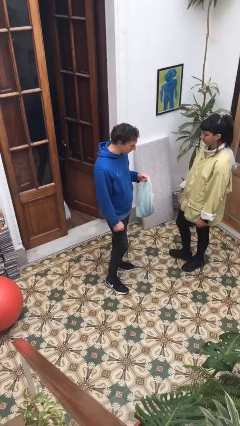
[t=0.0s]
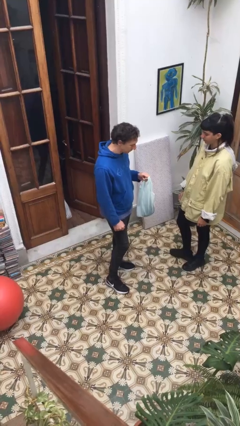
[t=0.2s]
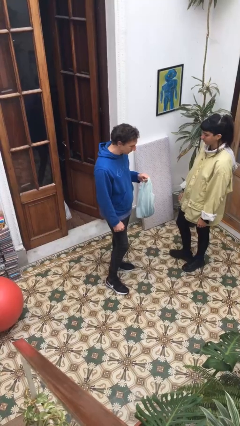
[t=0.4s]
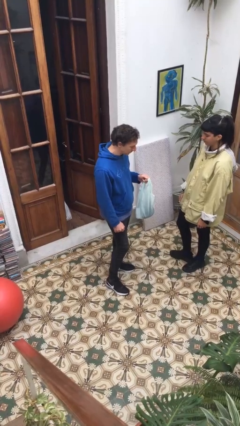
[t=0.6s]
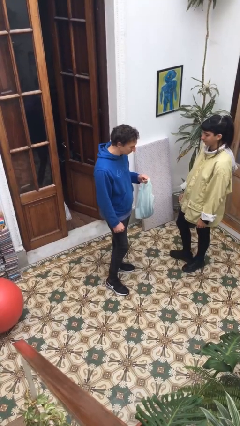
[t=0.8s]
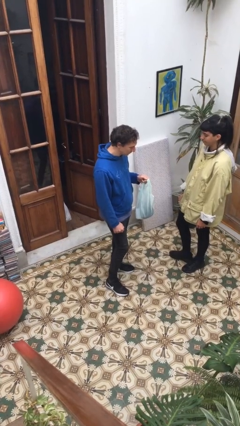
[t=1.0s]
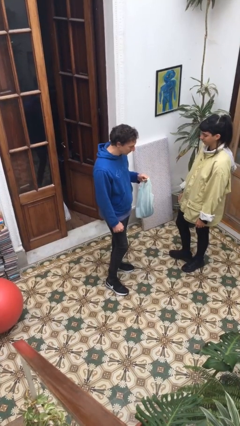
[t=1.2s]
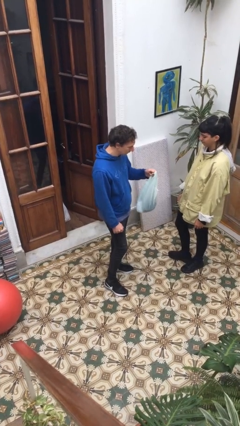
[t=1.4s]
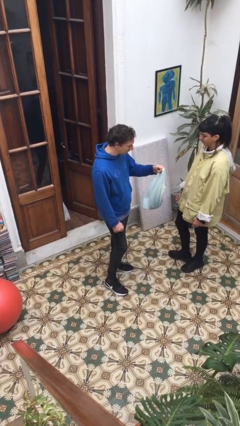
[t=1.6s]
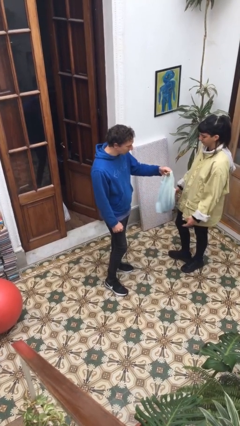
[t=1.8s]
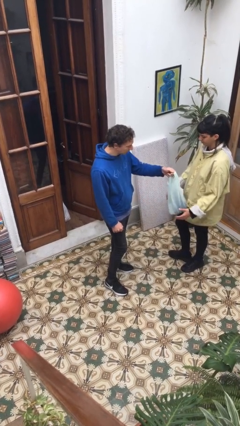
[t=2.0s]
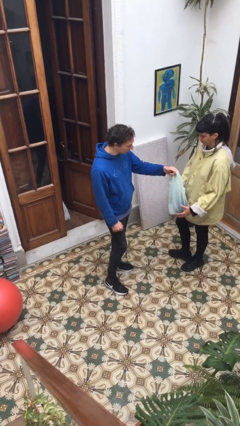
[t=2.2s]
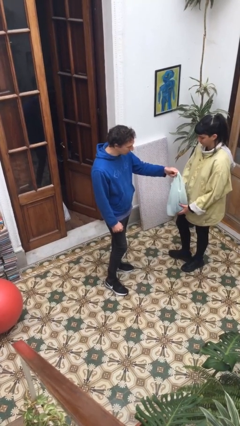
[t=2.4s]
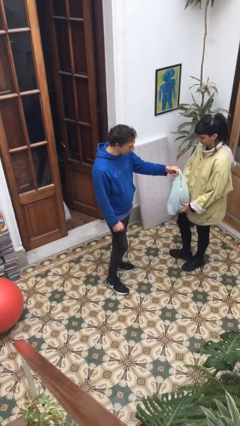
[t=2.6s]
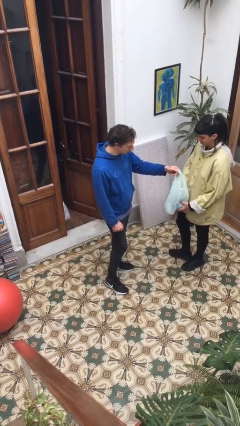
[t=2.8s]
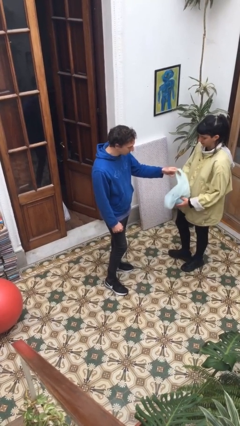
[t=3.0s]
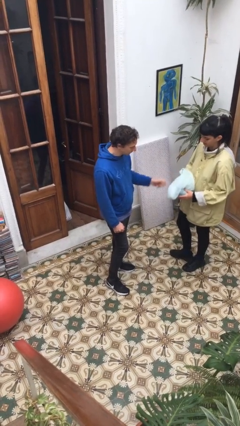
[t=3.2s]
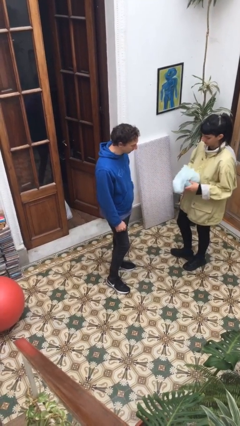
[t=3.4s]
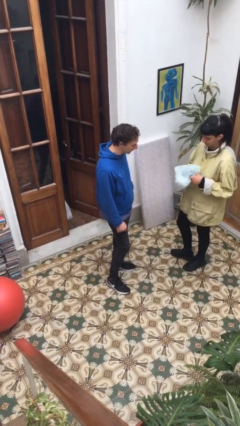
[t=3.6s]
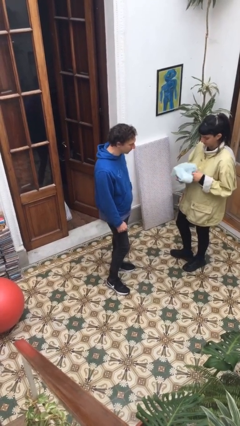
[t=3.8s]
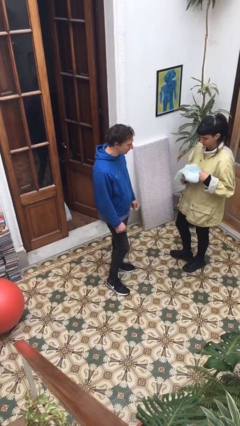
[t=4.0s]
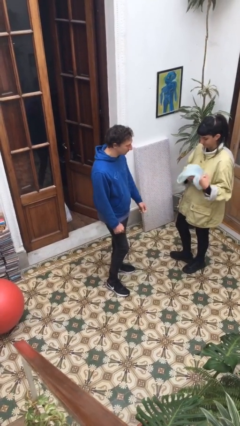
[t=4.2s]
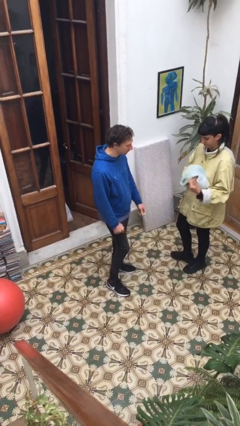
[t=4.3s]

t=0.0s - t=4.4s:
person transfers object to person

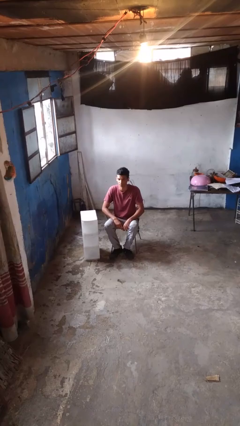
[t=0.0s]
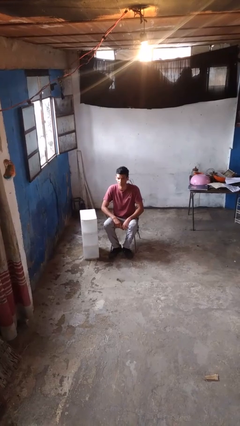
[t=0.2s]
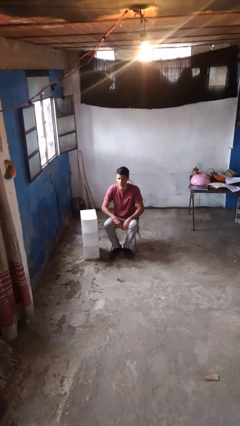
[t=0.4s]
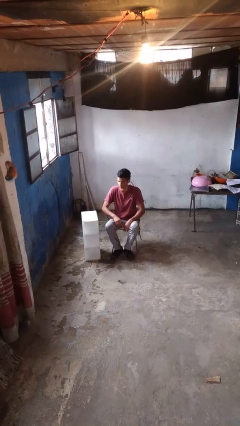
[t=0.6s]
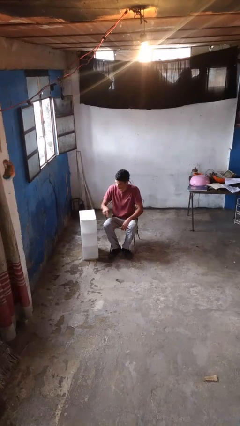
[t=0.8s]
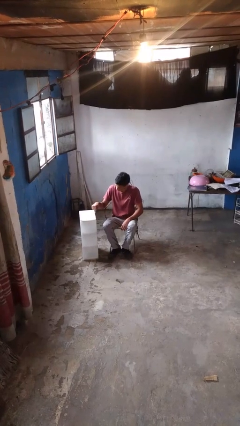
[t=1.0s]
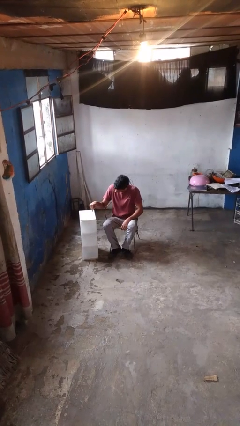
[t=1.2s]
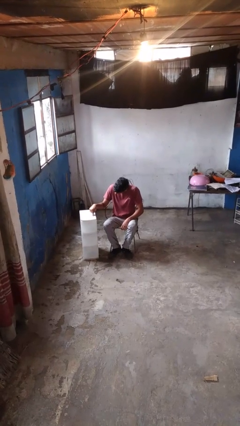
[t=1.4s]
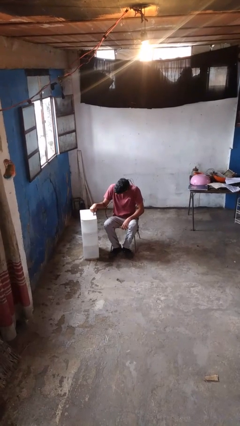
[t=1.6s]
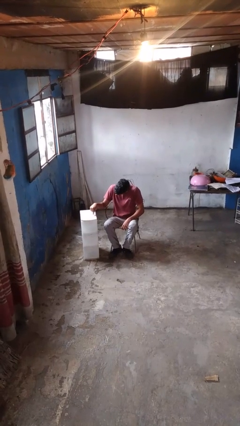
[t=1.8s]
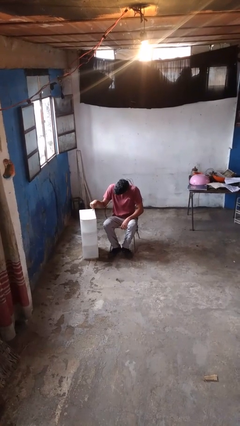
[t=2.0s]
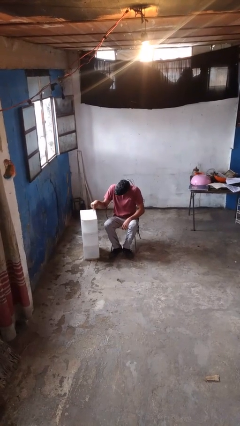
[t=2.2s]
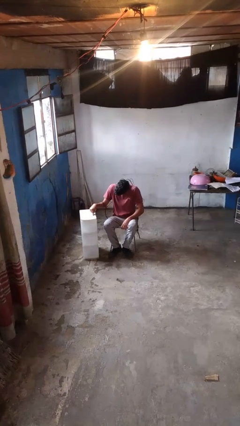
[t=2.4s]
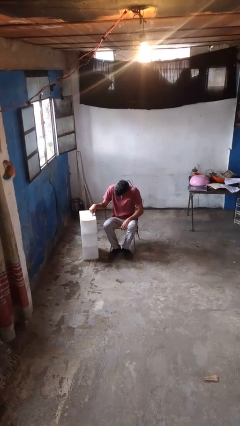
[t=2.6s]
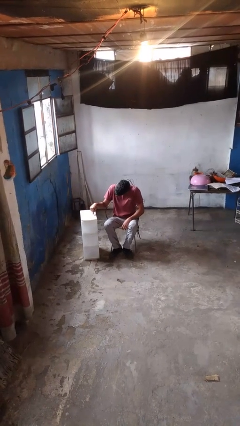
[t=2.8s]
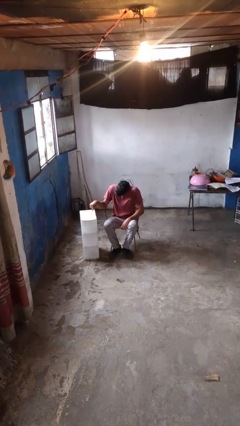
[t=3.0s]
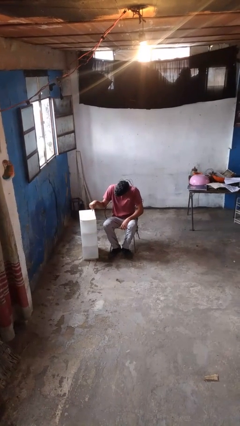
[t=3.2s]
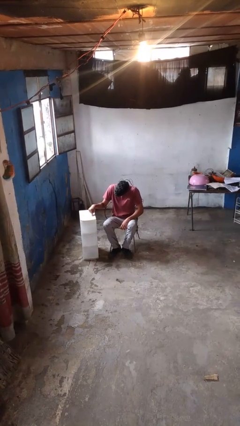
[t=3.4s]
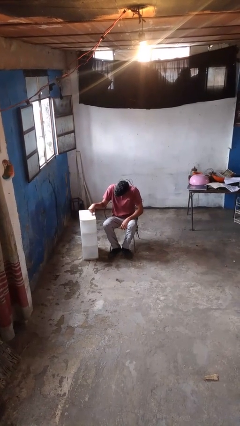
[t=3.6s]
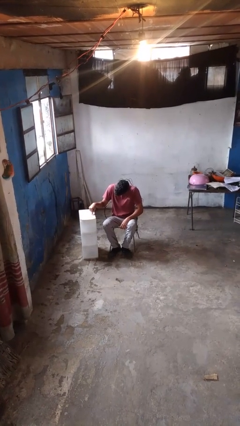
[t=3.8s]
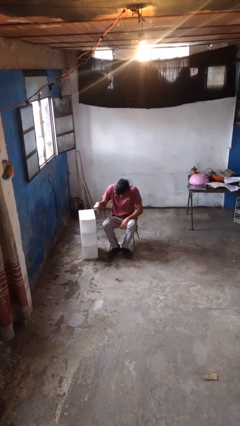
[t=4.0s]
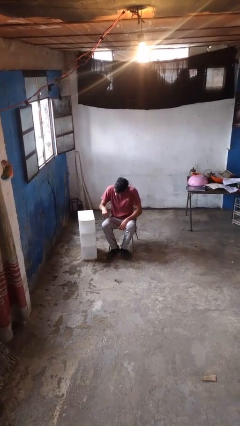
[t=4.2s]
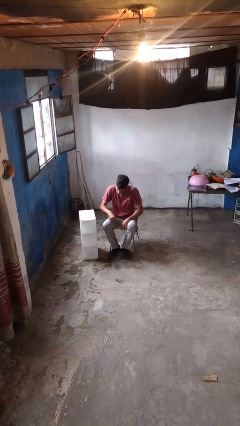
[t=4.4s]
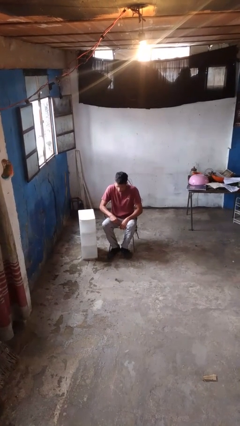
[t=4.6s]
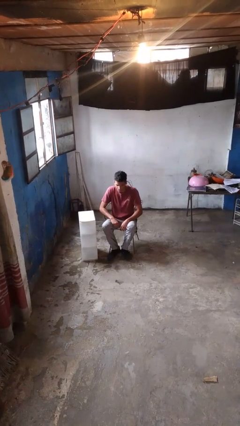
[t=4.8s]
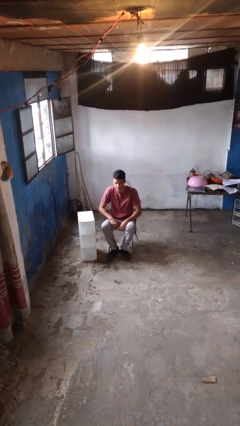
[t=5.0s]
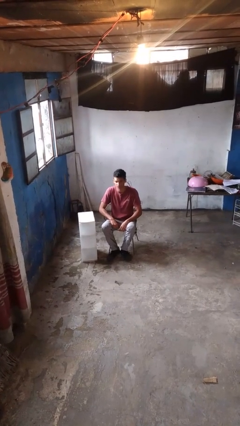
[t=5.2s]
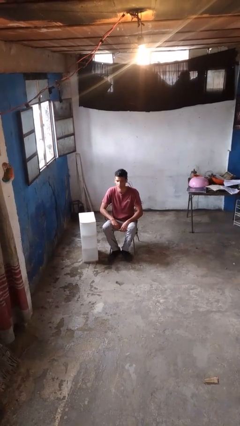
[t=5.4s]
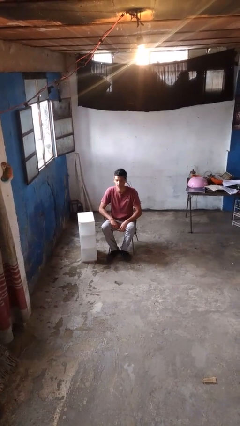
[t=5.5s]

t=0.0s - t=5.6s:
person taps object with finger

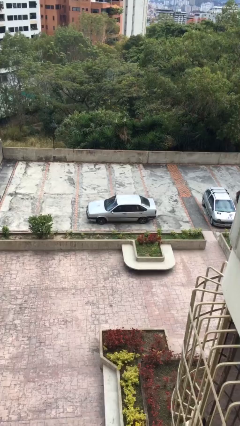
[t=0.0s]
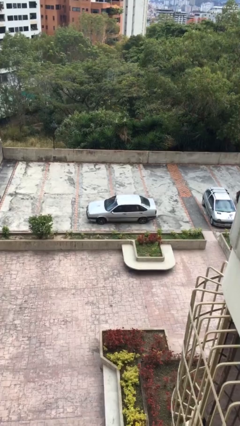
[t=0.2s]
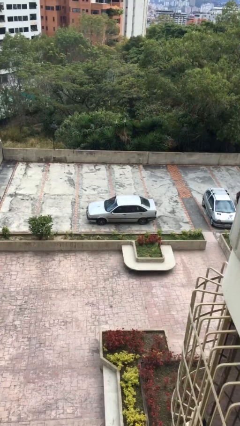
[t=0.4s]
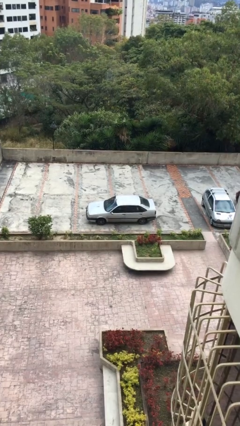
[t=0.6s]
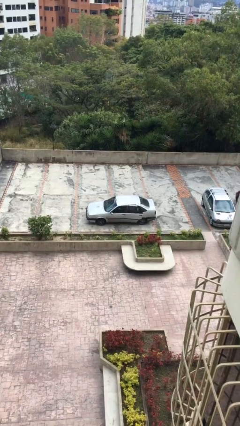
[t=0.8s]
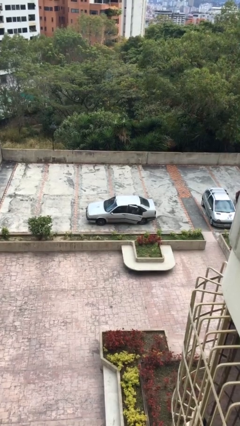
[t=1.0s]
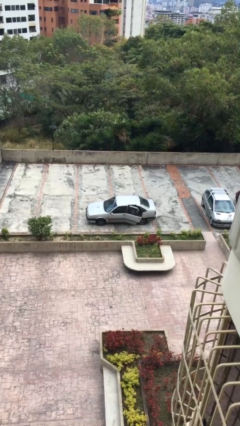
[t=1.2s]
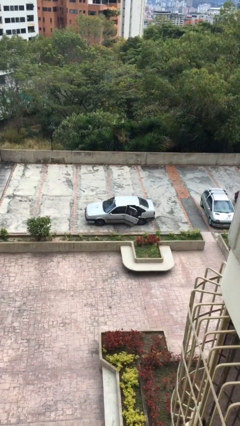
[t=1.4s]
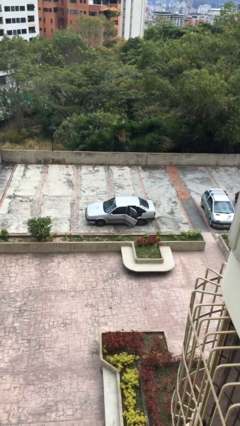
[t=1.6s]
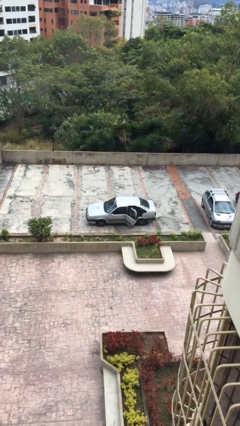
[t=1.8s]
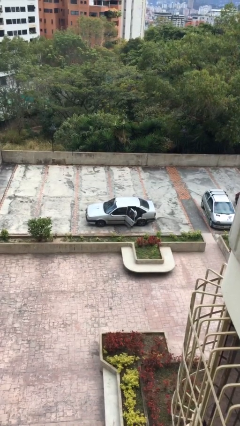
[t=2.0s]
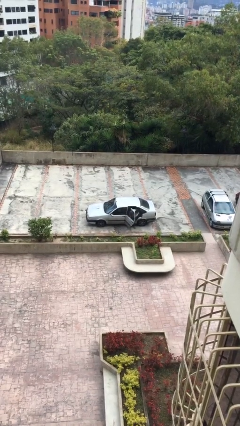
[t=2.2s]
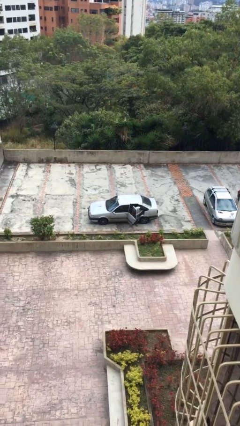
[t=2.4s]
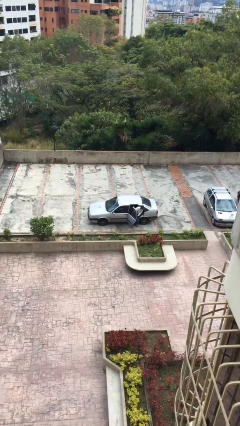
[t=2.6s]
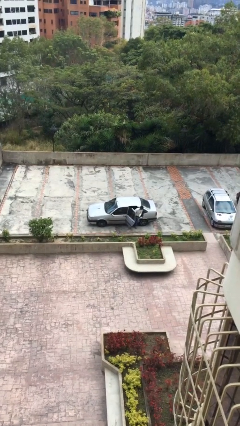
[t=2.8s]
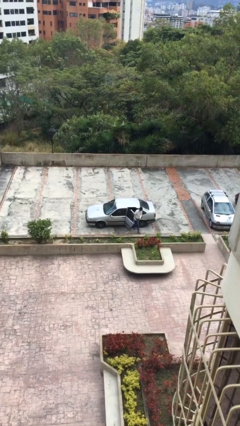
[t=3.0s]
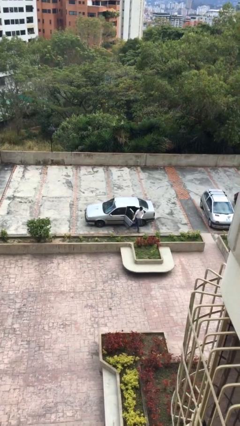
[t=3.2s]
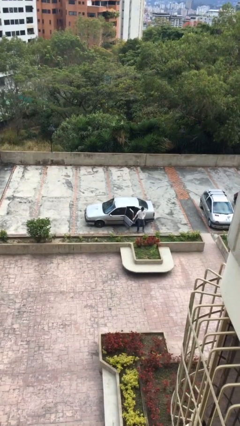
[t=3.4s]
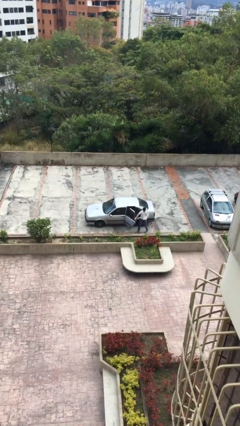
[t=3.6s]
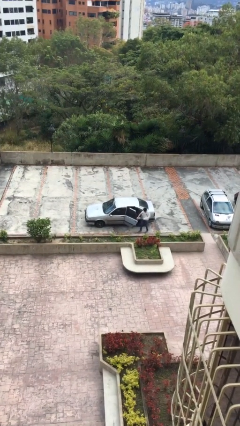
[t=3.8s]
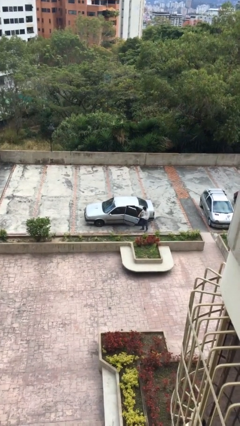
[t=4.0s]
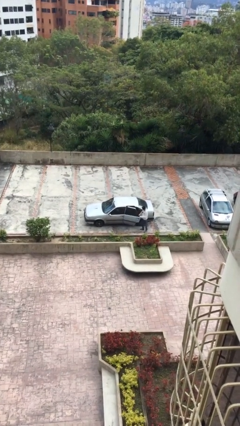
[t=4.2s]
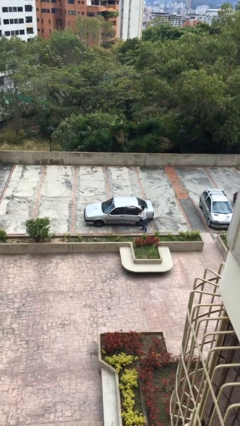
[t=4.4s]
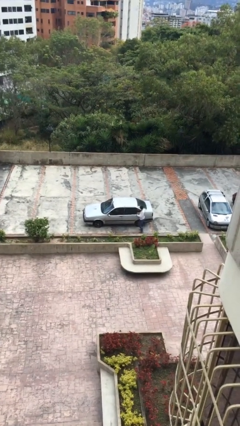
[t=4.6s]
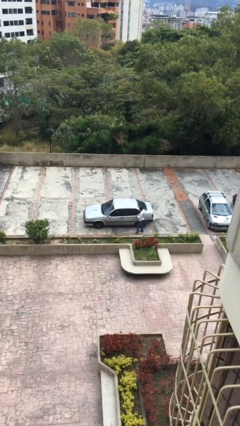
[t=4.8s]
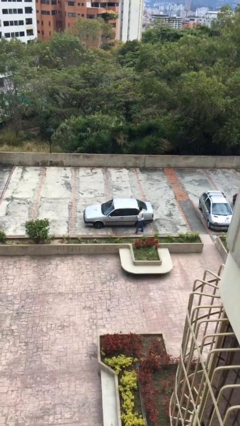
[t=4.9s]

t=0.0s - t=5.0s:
car drops off person

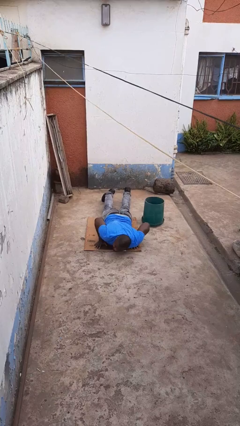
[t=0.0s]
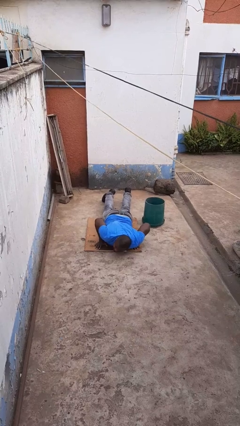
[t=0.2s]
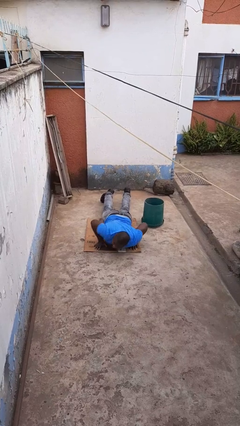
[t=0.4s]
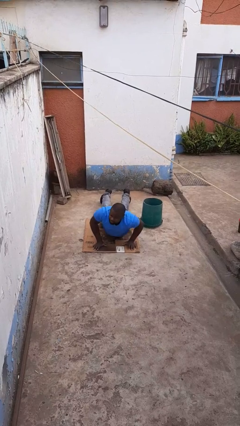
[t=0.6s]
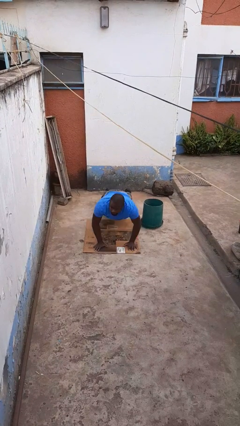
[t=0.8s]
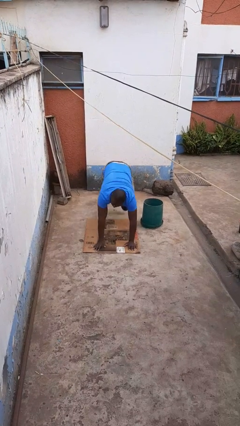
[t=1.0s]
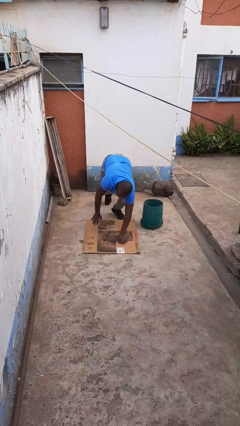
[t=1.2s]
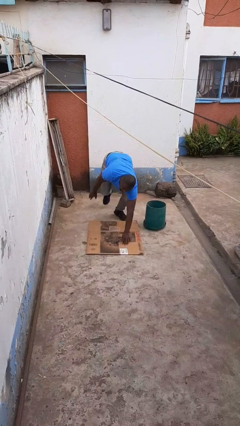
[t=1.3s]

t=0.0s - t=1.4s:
person stands up from floor

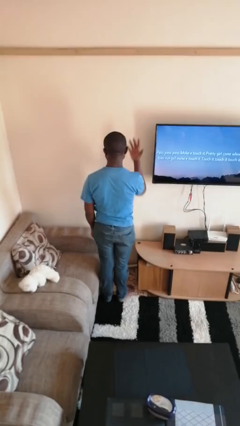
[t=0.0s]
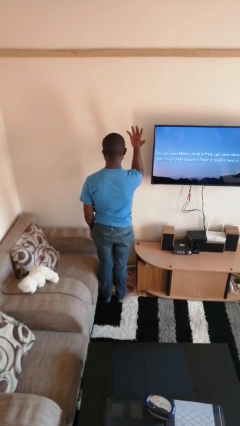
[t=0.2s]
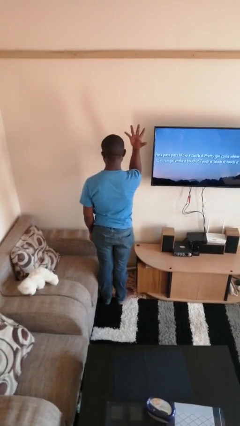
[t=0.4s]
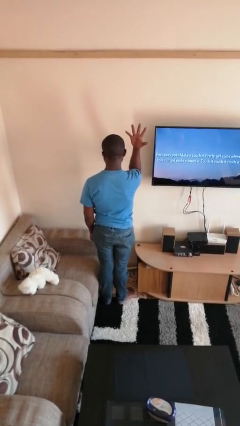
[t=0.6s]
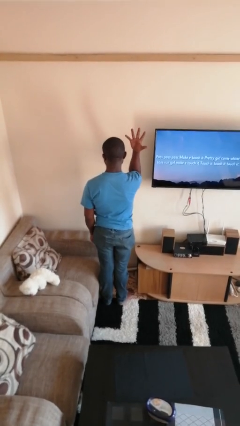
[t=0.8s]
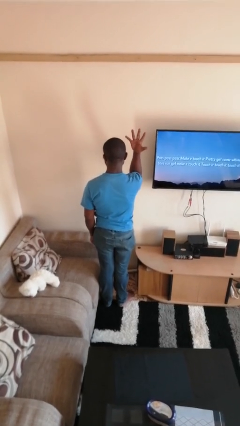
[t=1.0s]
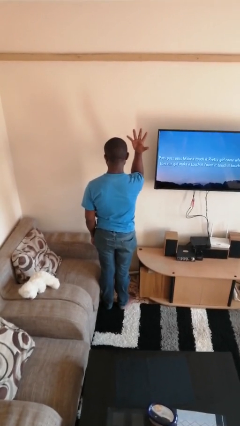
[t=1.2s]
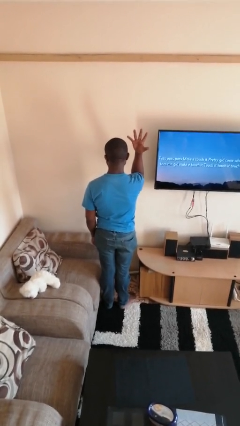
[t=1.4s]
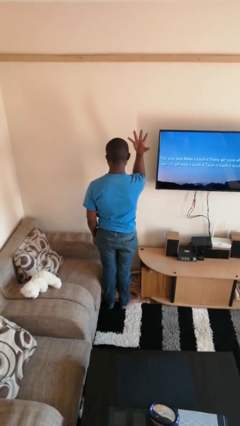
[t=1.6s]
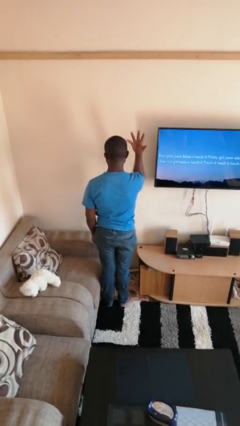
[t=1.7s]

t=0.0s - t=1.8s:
person gestures number five
